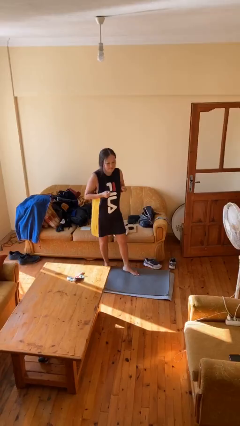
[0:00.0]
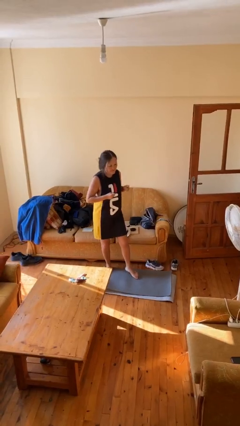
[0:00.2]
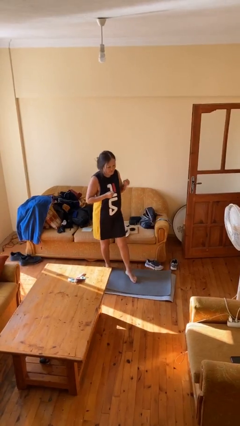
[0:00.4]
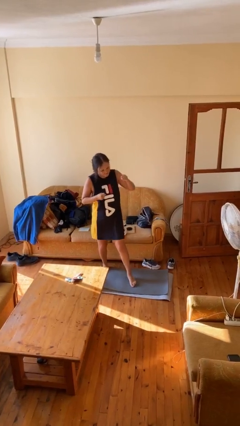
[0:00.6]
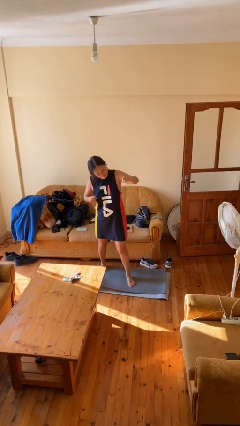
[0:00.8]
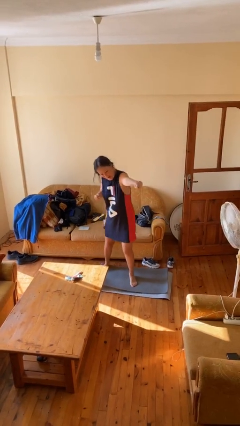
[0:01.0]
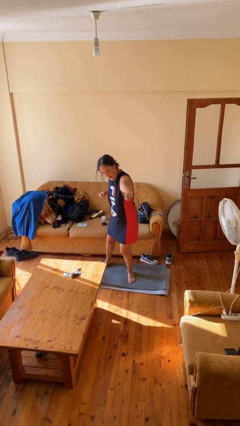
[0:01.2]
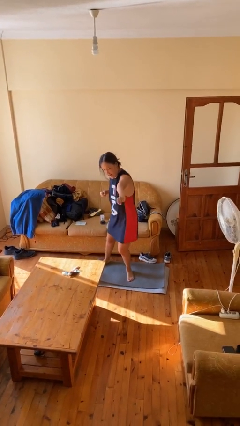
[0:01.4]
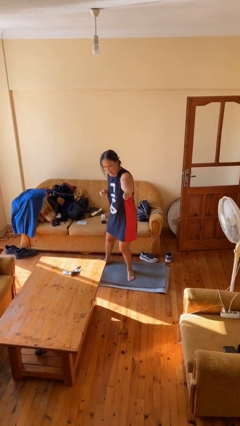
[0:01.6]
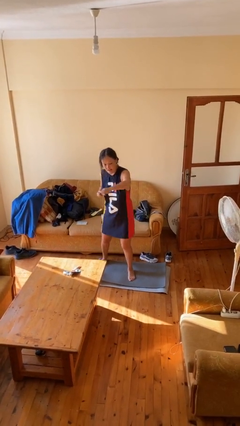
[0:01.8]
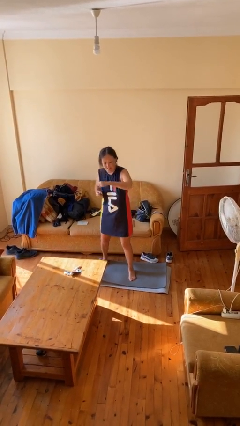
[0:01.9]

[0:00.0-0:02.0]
person punches

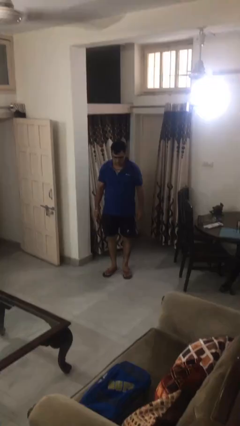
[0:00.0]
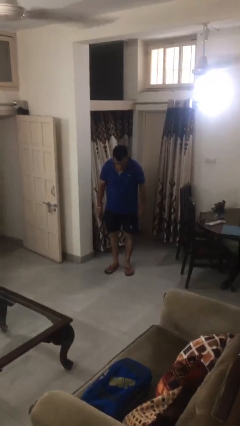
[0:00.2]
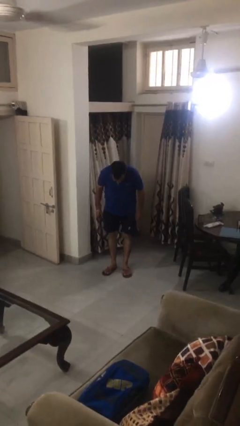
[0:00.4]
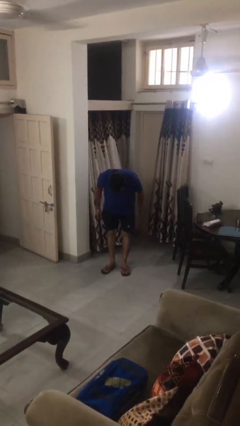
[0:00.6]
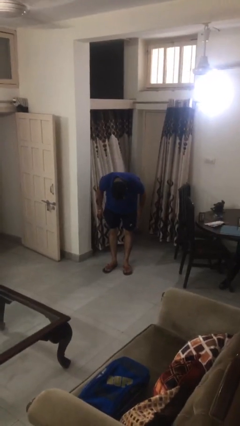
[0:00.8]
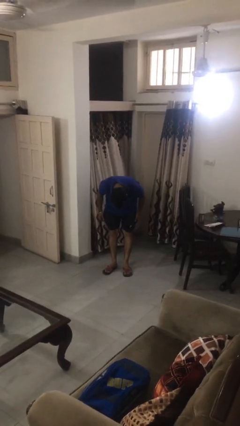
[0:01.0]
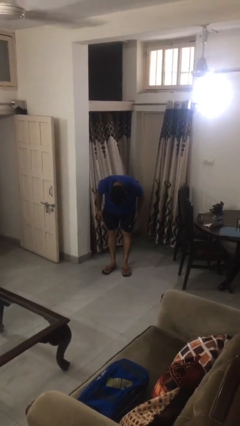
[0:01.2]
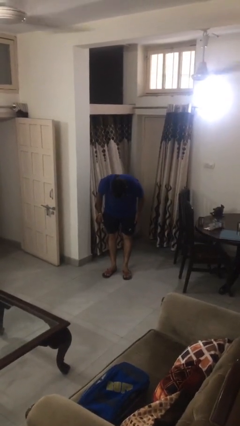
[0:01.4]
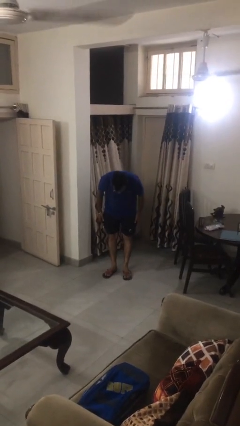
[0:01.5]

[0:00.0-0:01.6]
person bows

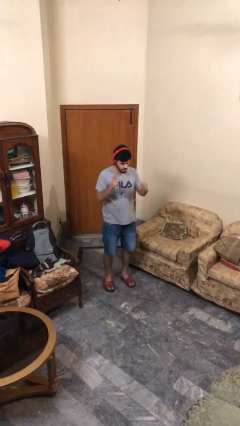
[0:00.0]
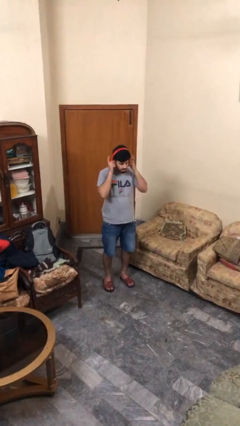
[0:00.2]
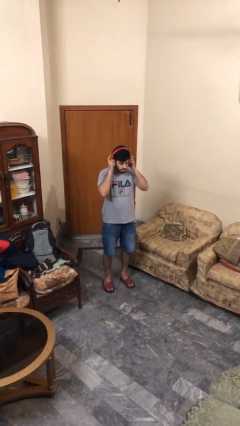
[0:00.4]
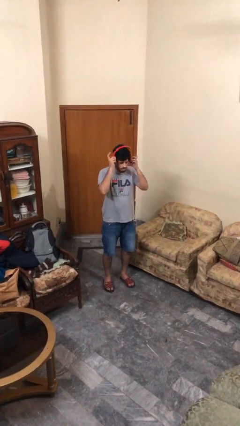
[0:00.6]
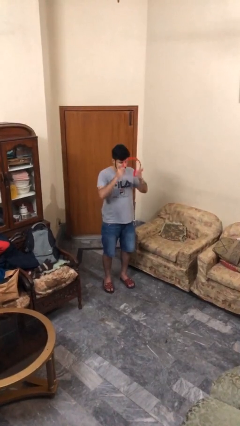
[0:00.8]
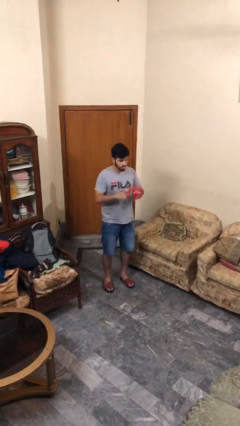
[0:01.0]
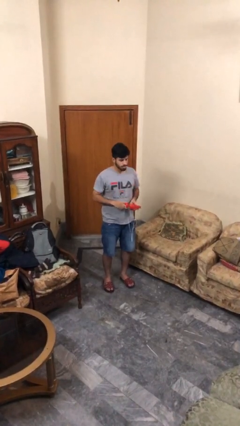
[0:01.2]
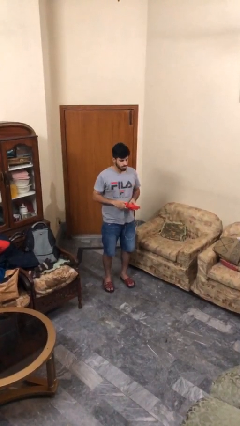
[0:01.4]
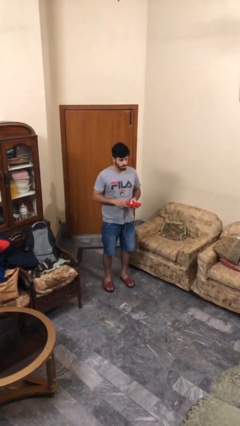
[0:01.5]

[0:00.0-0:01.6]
person takes off headphones

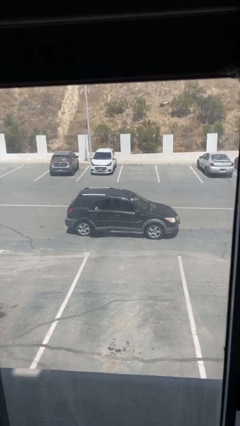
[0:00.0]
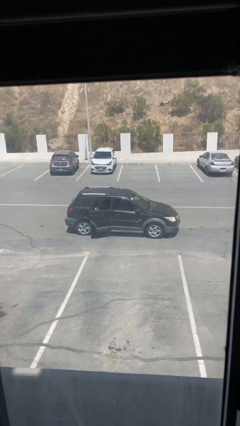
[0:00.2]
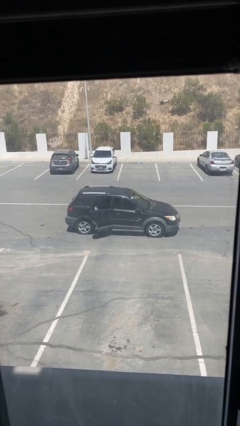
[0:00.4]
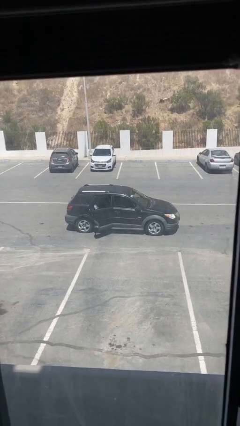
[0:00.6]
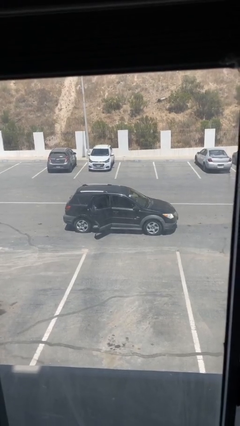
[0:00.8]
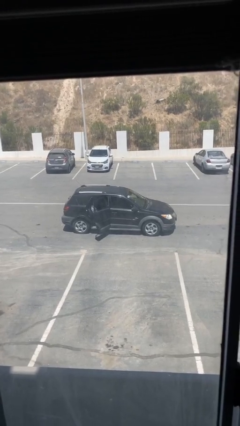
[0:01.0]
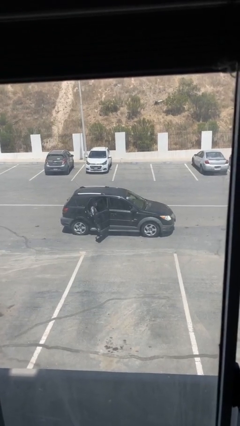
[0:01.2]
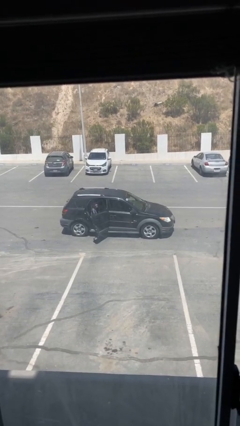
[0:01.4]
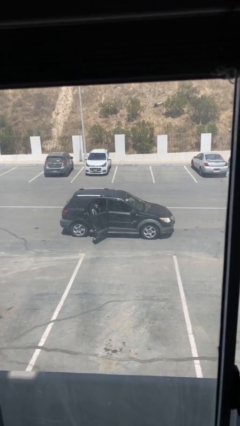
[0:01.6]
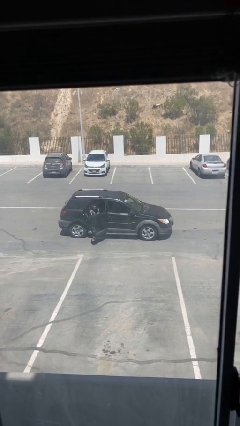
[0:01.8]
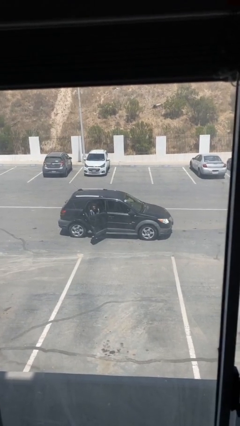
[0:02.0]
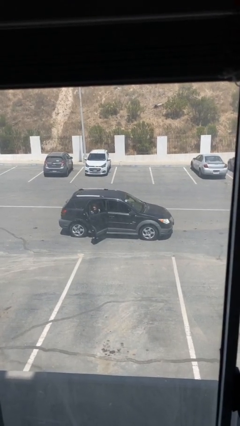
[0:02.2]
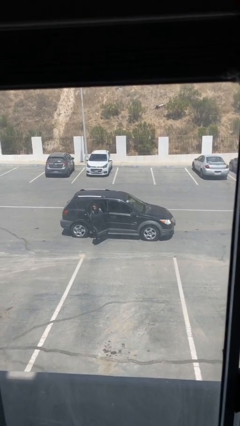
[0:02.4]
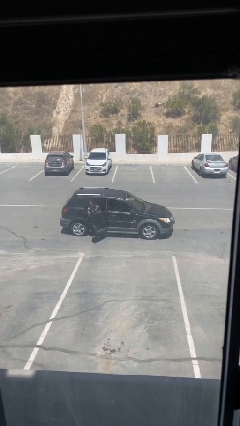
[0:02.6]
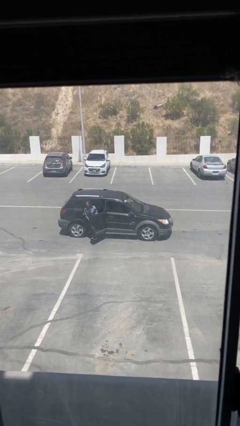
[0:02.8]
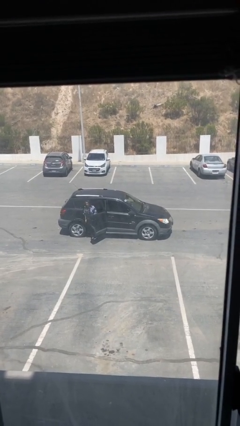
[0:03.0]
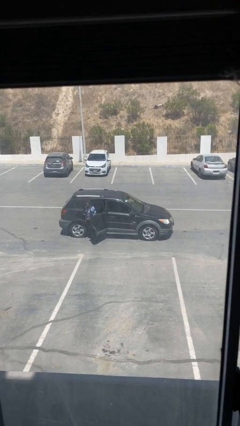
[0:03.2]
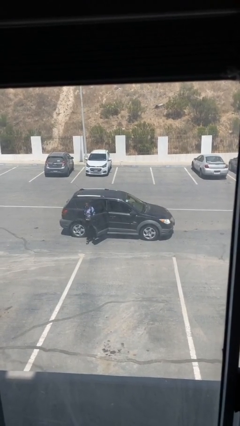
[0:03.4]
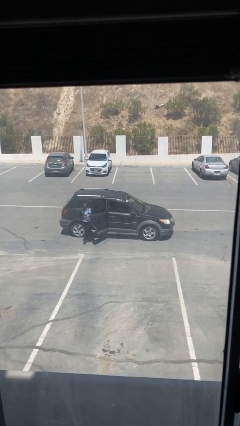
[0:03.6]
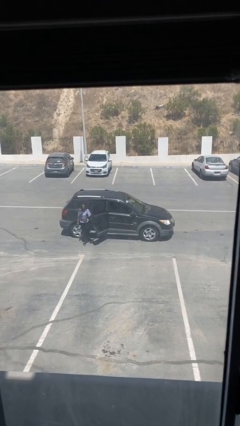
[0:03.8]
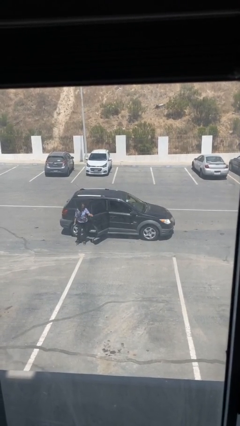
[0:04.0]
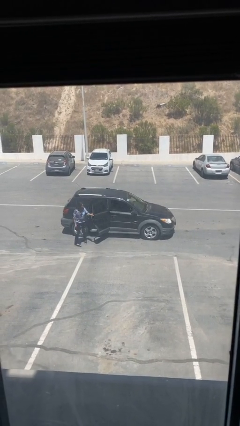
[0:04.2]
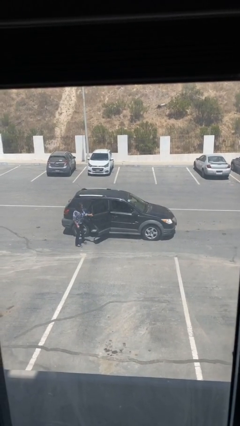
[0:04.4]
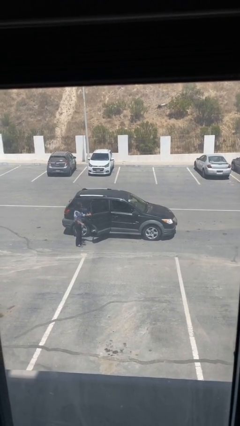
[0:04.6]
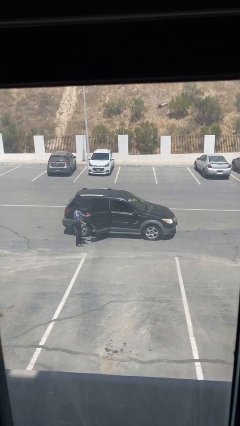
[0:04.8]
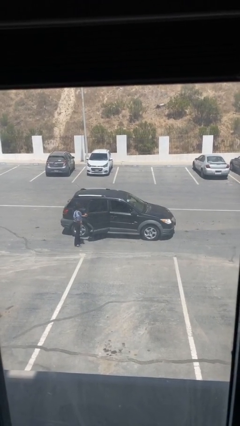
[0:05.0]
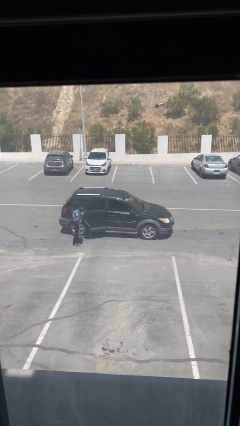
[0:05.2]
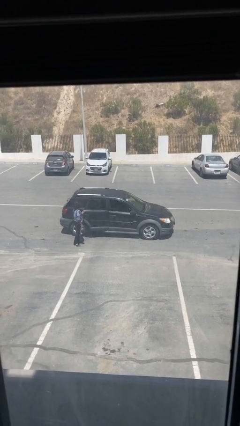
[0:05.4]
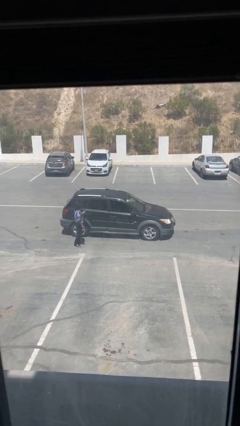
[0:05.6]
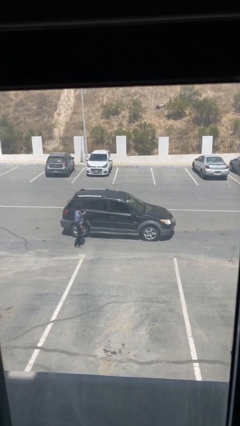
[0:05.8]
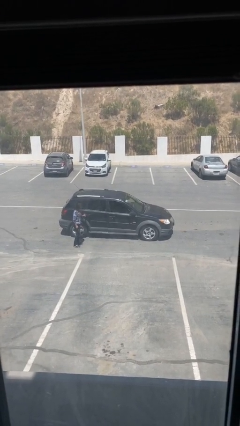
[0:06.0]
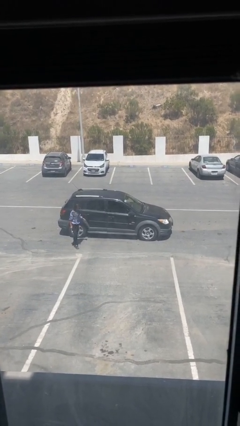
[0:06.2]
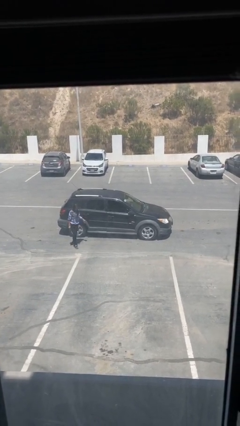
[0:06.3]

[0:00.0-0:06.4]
car drops off person

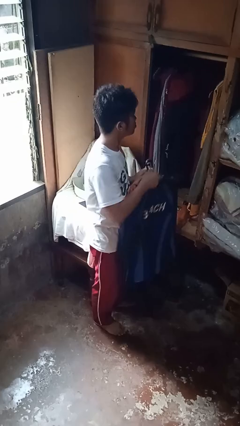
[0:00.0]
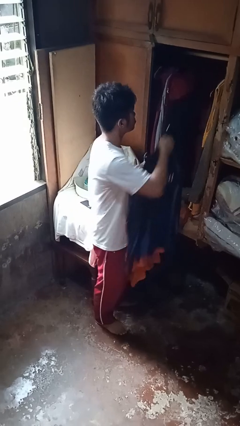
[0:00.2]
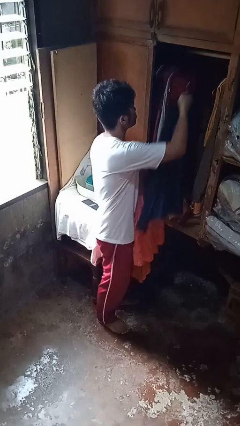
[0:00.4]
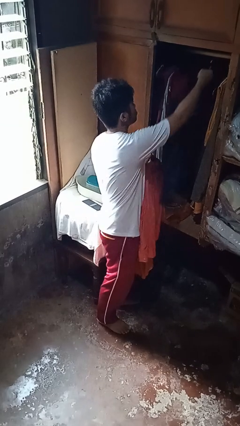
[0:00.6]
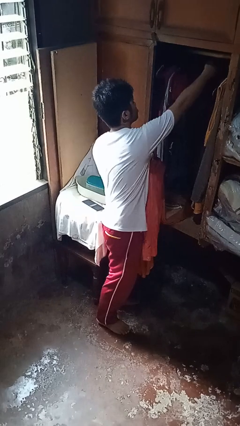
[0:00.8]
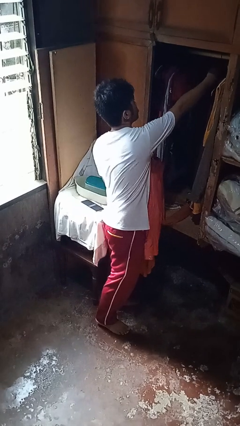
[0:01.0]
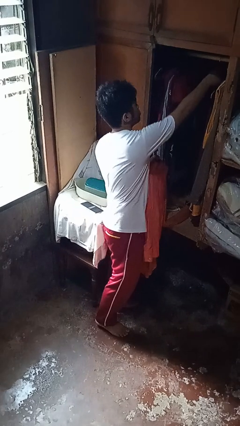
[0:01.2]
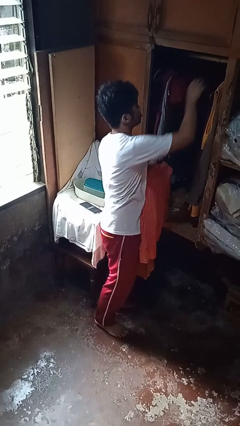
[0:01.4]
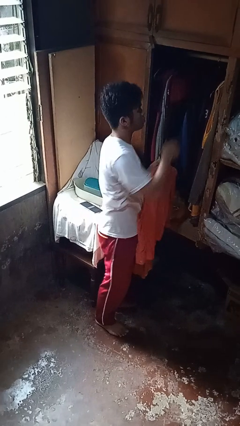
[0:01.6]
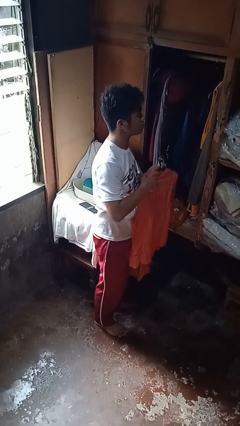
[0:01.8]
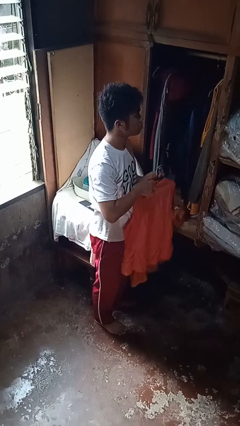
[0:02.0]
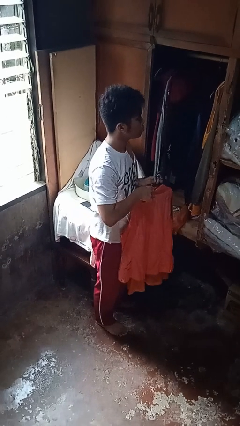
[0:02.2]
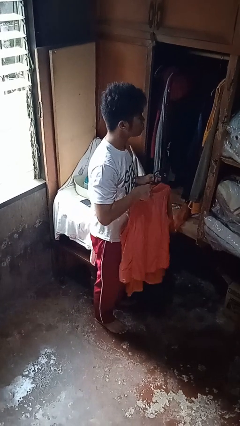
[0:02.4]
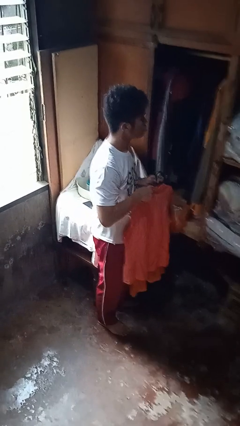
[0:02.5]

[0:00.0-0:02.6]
person puts clothes into closet

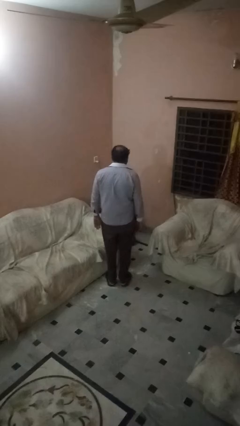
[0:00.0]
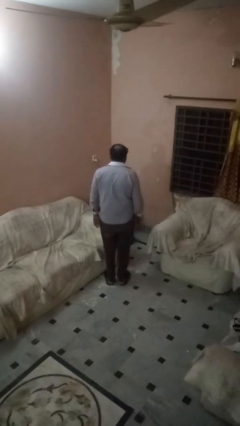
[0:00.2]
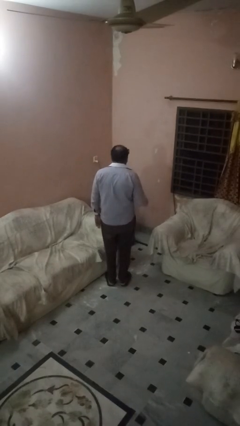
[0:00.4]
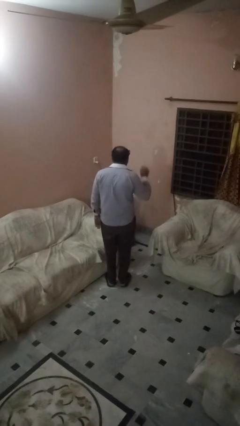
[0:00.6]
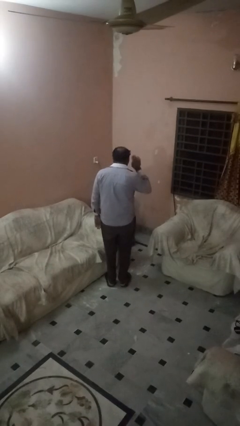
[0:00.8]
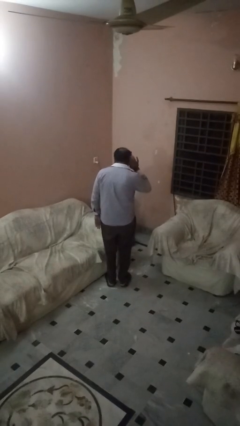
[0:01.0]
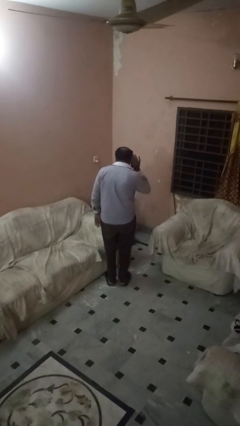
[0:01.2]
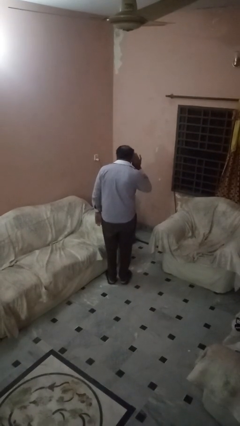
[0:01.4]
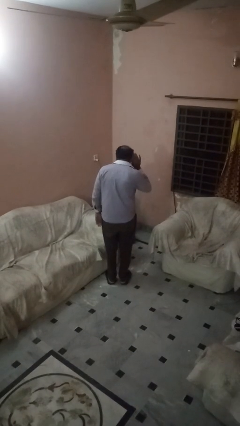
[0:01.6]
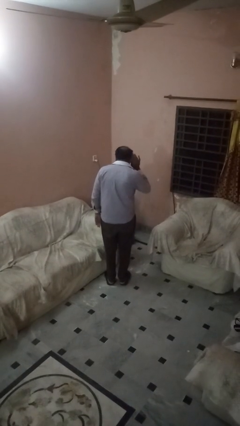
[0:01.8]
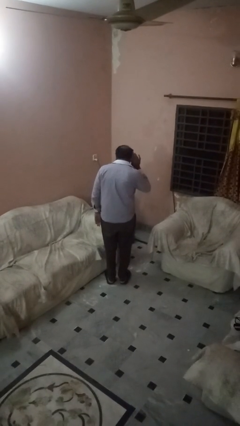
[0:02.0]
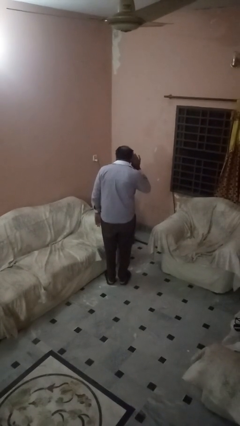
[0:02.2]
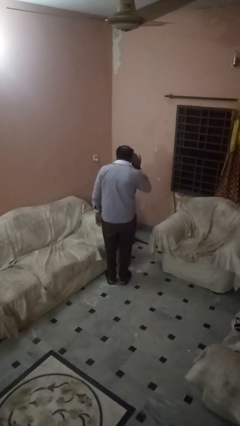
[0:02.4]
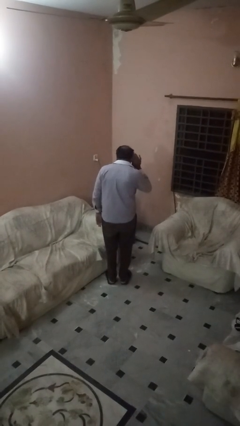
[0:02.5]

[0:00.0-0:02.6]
person gestures listen closely
